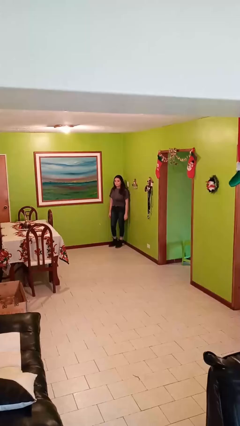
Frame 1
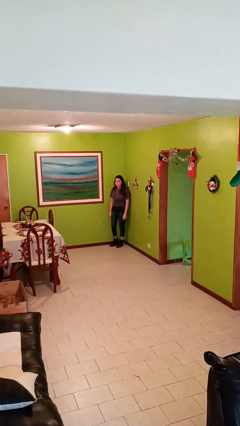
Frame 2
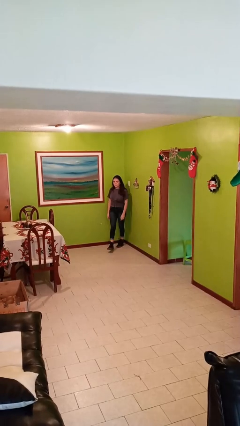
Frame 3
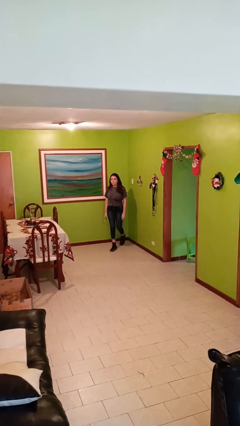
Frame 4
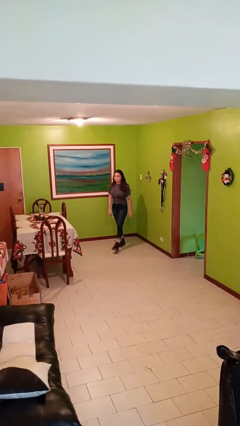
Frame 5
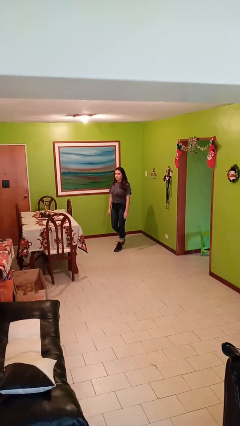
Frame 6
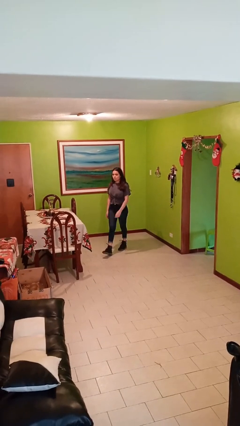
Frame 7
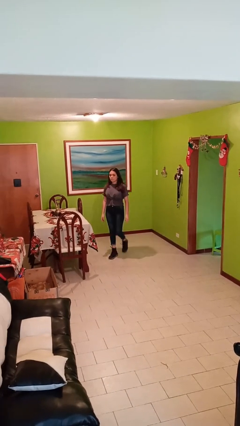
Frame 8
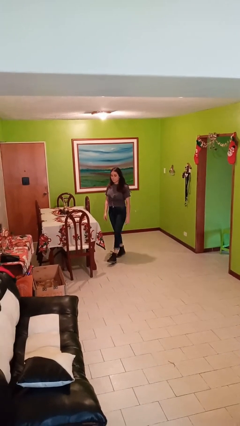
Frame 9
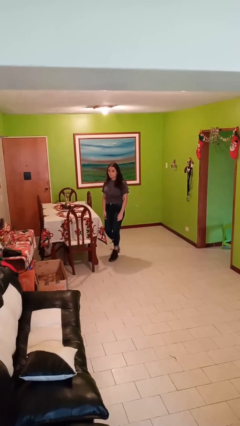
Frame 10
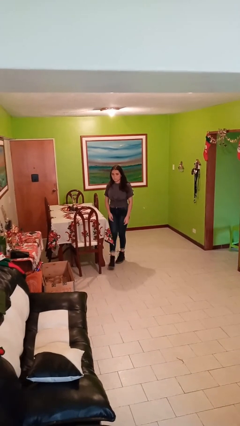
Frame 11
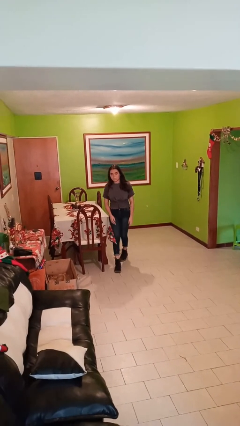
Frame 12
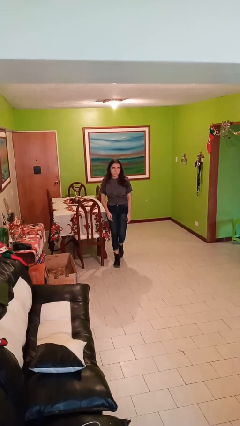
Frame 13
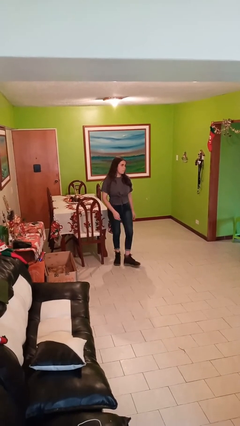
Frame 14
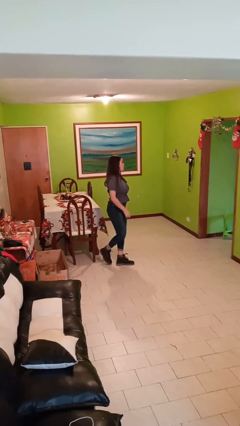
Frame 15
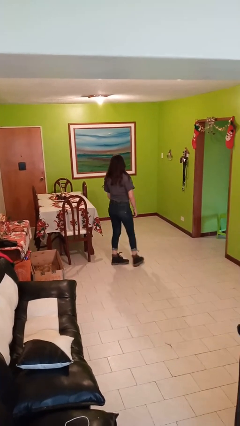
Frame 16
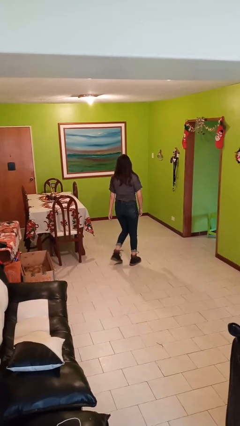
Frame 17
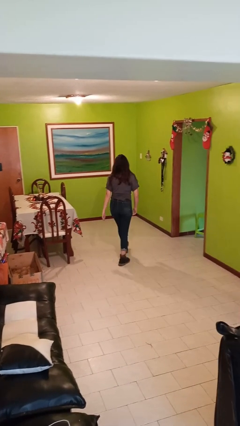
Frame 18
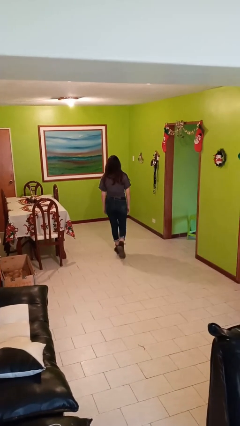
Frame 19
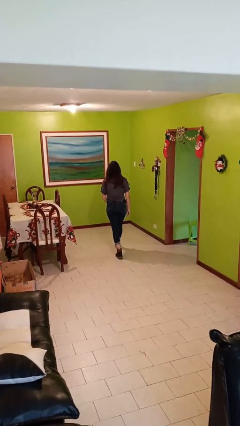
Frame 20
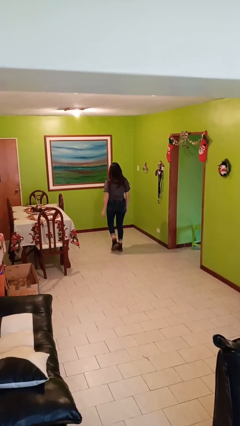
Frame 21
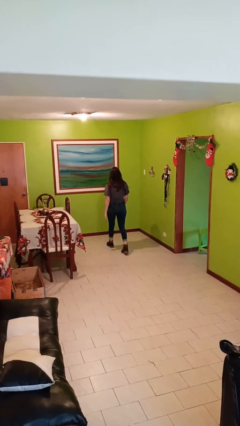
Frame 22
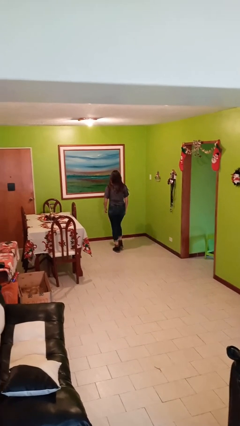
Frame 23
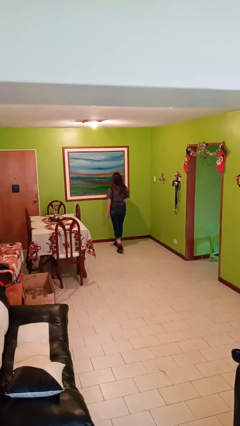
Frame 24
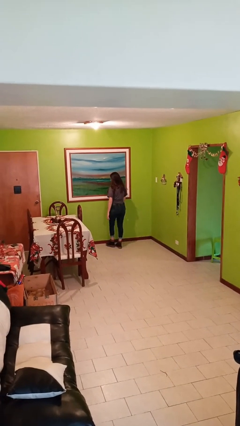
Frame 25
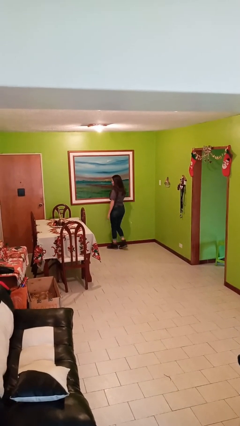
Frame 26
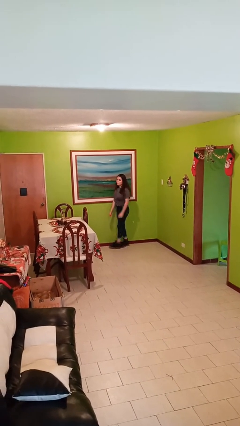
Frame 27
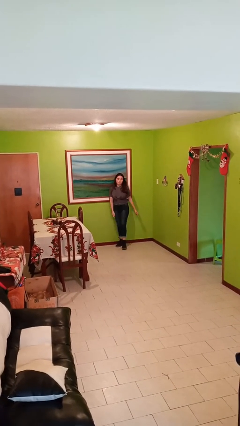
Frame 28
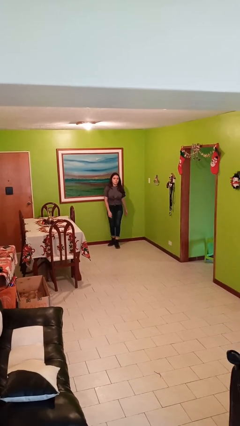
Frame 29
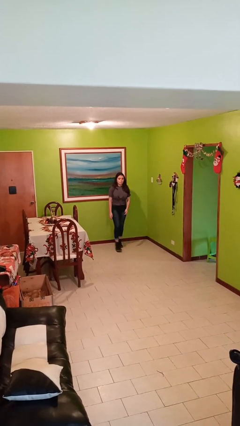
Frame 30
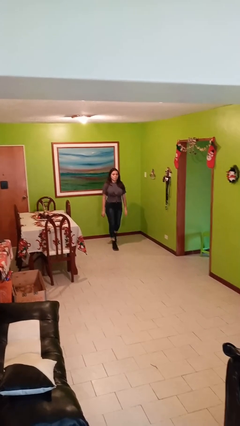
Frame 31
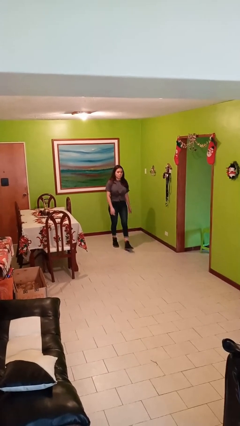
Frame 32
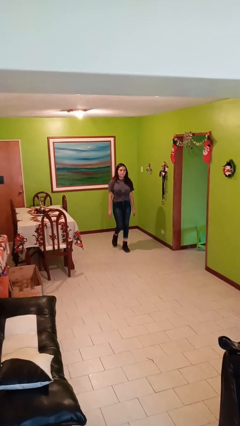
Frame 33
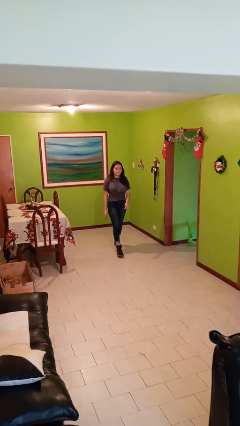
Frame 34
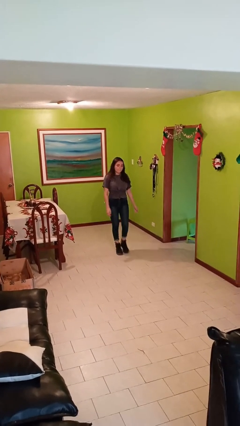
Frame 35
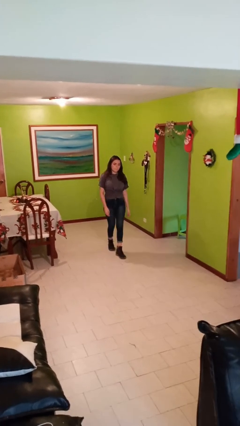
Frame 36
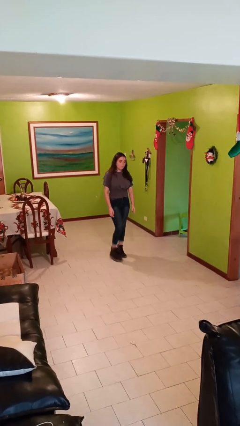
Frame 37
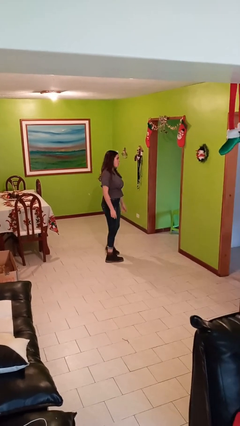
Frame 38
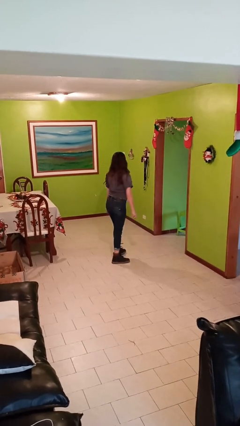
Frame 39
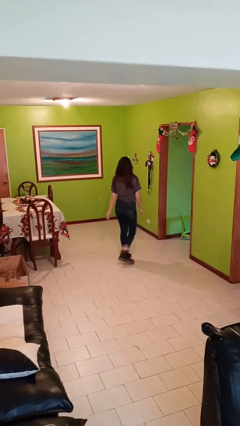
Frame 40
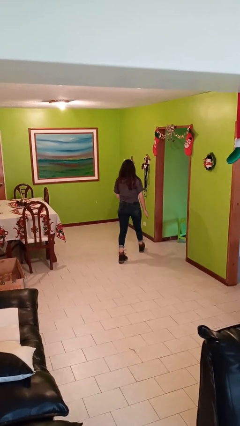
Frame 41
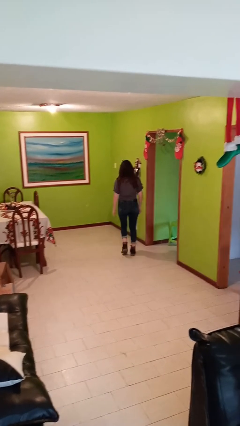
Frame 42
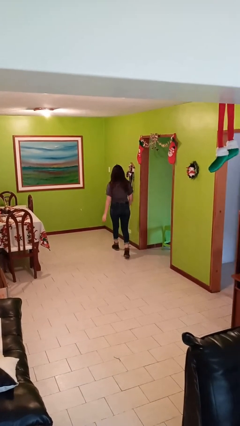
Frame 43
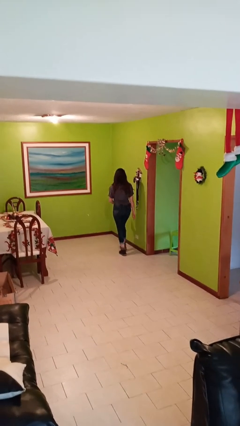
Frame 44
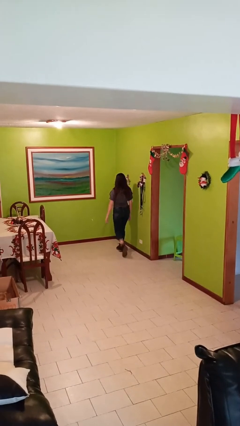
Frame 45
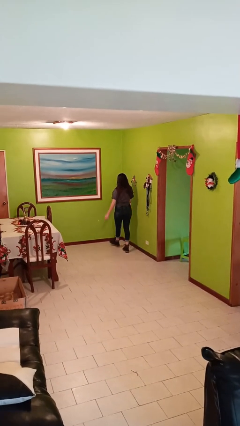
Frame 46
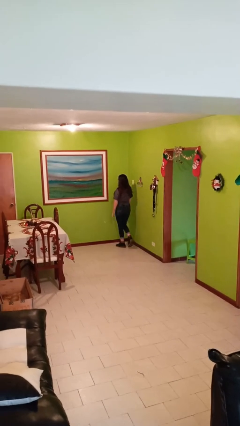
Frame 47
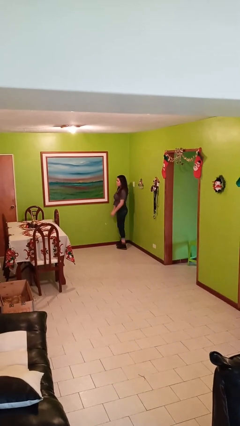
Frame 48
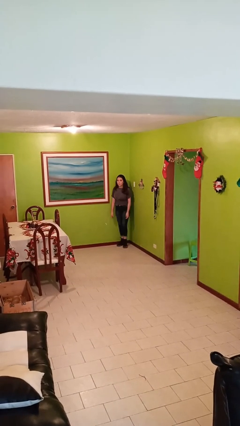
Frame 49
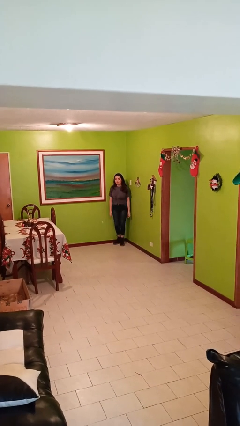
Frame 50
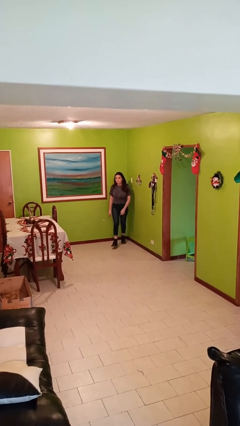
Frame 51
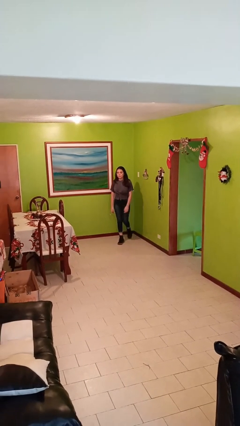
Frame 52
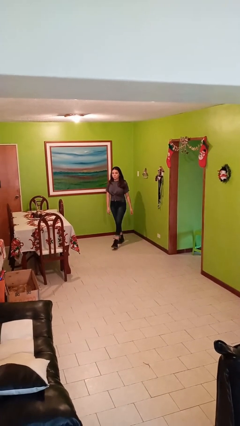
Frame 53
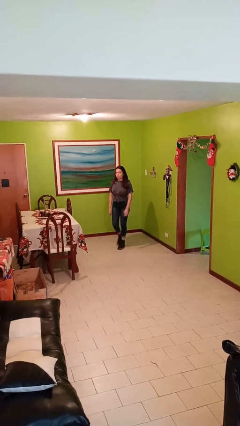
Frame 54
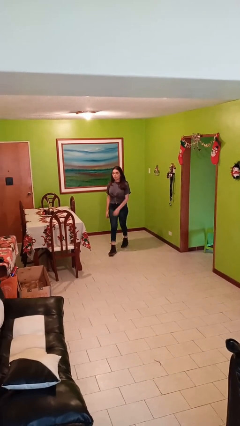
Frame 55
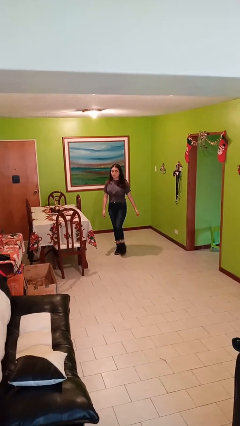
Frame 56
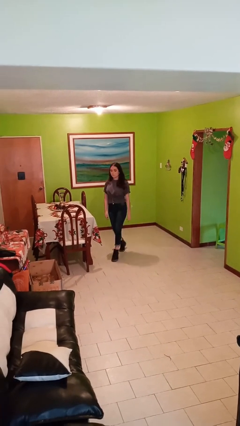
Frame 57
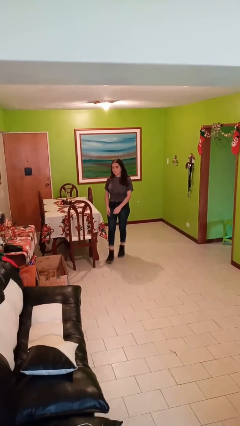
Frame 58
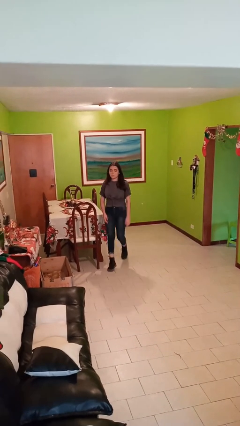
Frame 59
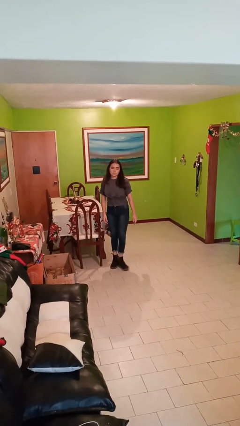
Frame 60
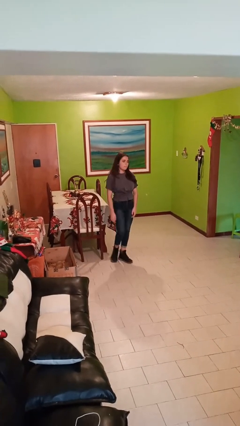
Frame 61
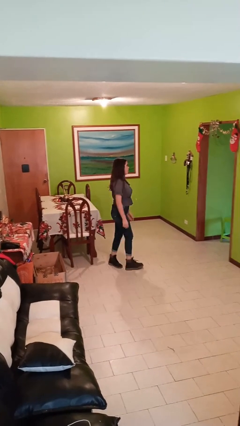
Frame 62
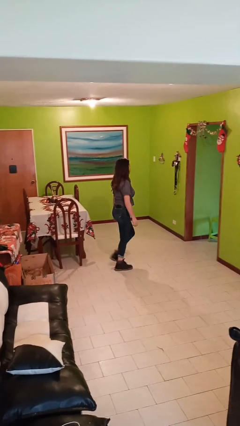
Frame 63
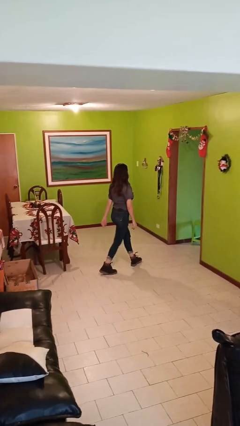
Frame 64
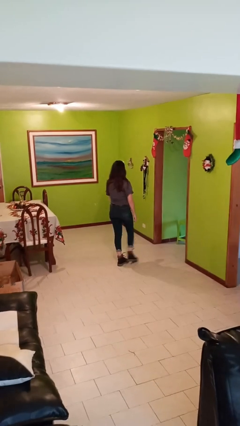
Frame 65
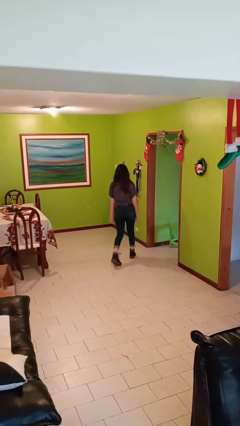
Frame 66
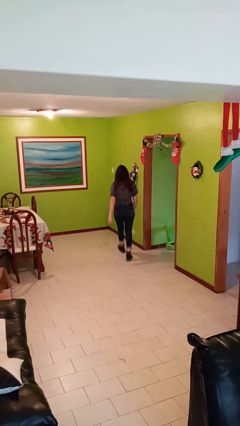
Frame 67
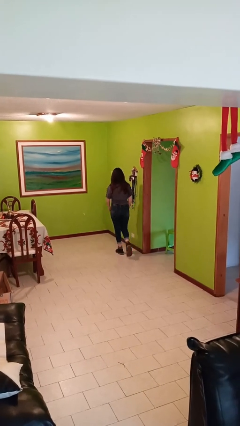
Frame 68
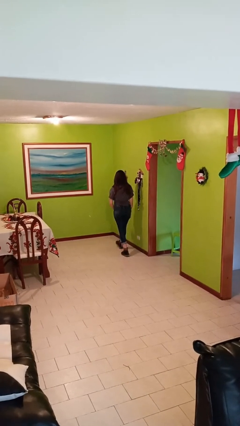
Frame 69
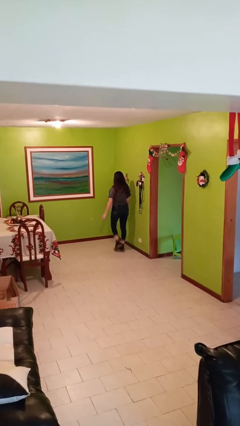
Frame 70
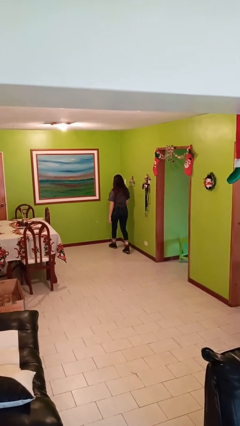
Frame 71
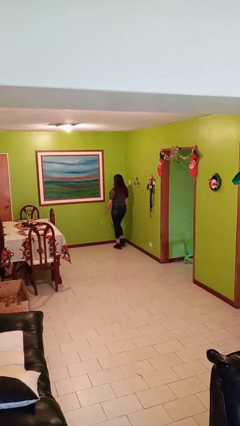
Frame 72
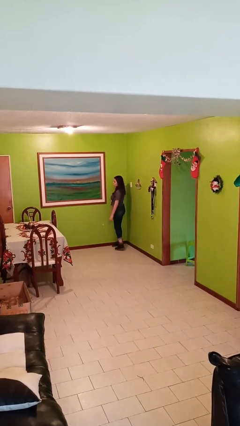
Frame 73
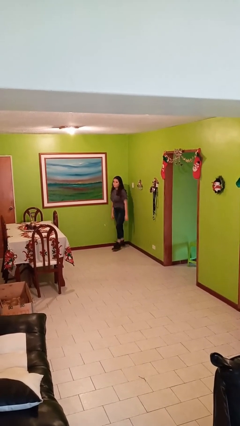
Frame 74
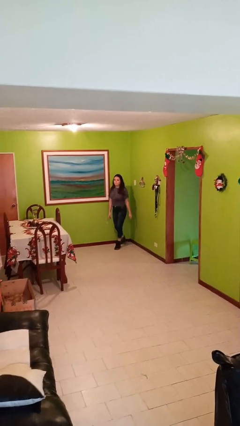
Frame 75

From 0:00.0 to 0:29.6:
person walks

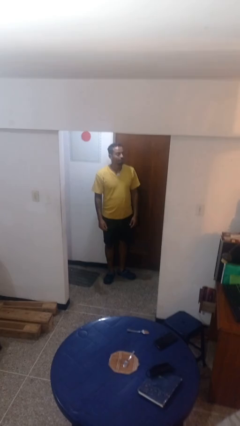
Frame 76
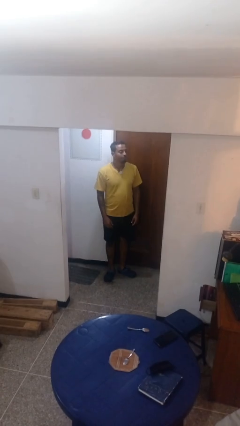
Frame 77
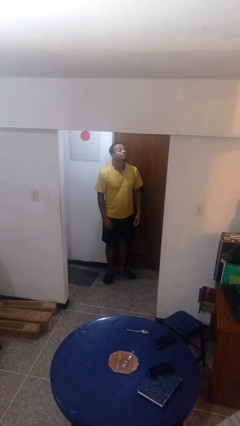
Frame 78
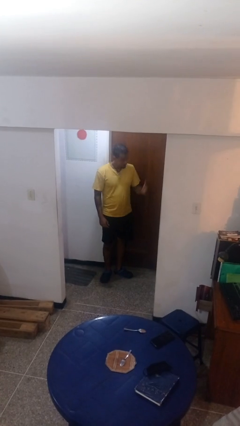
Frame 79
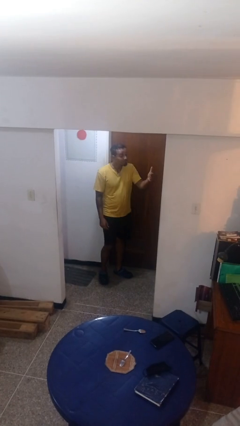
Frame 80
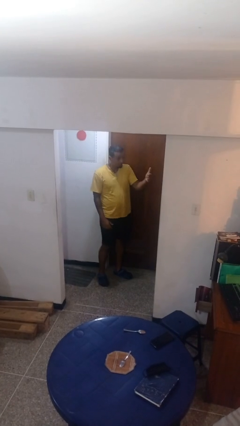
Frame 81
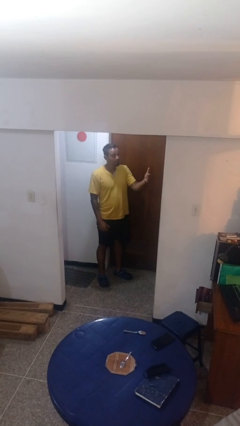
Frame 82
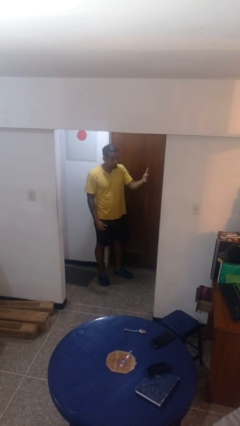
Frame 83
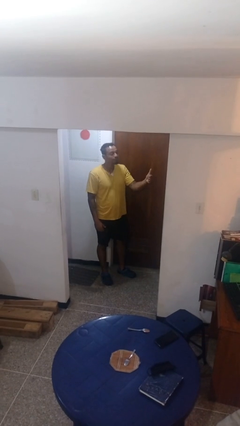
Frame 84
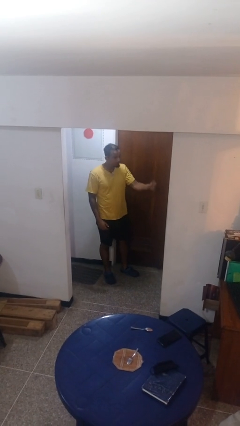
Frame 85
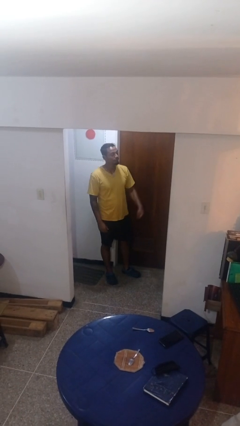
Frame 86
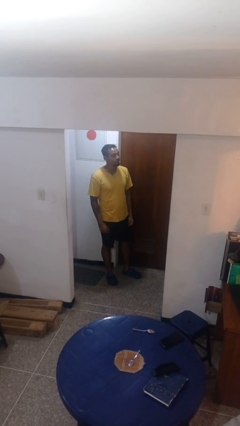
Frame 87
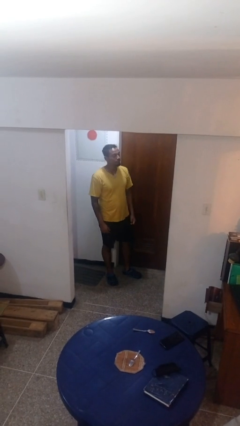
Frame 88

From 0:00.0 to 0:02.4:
person nods head

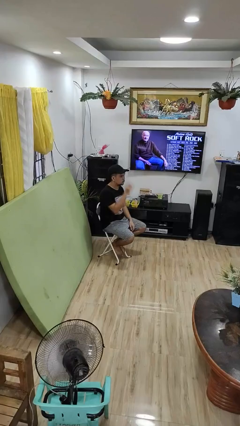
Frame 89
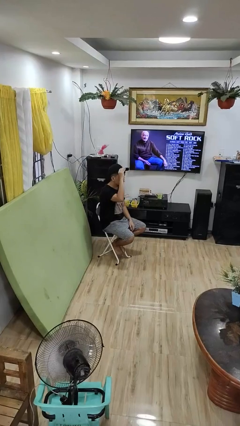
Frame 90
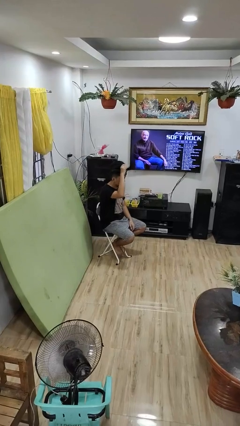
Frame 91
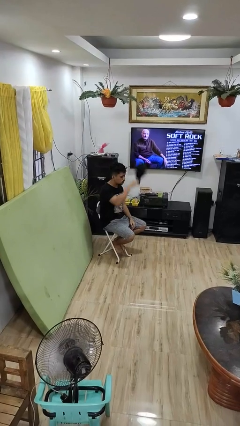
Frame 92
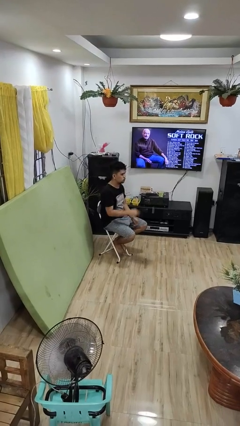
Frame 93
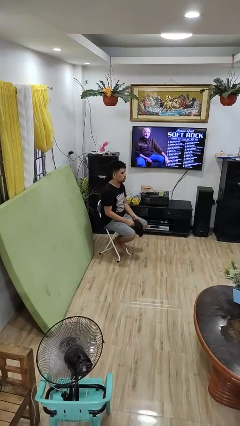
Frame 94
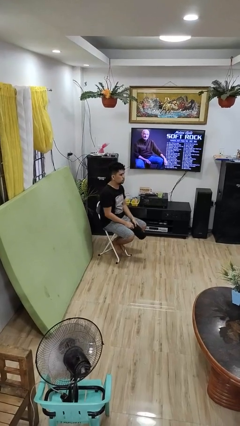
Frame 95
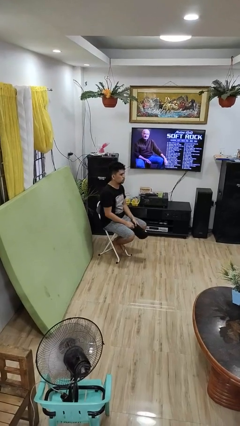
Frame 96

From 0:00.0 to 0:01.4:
person takes off hat
